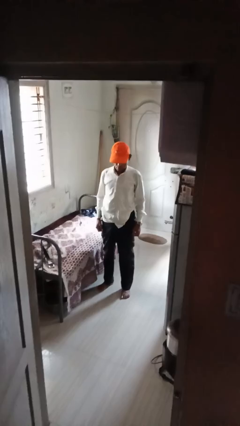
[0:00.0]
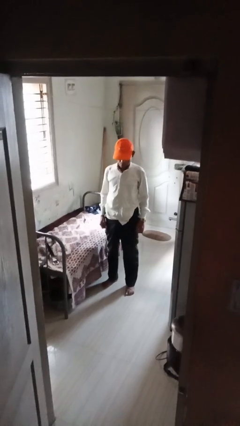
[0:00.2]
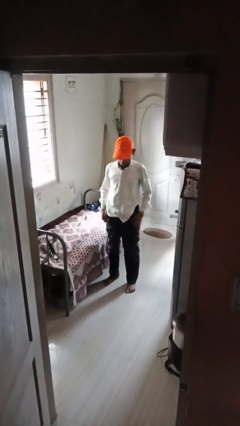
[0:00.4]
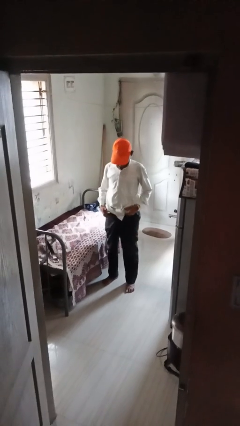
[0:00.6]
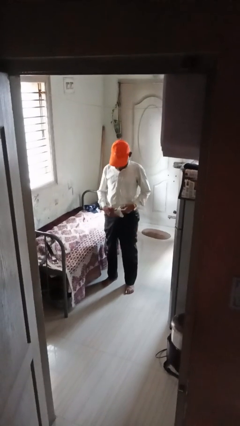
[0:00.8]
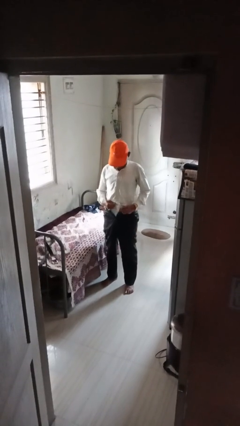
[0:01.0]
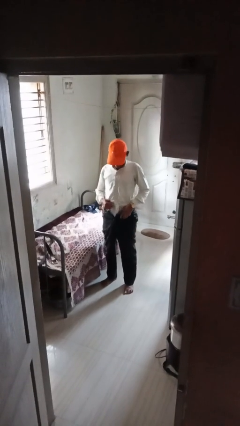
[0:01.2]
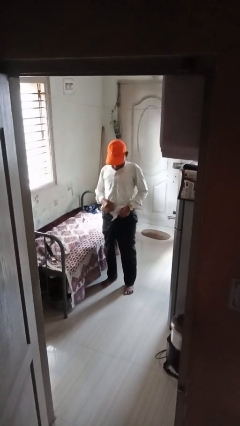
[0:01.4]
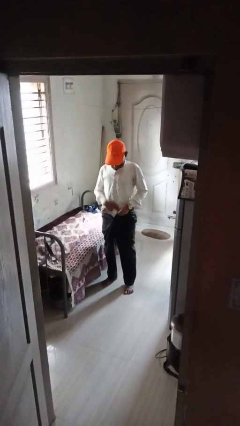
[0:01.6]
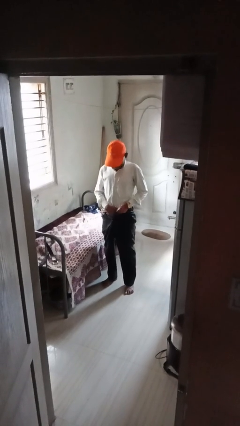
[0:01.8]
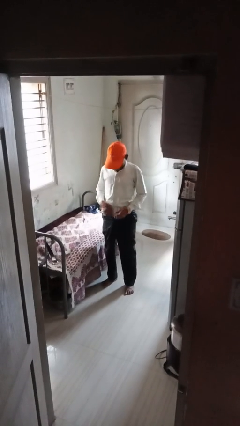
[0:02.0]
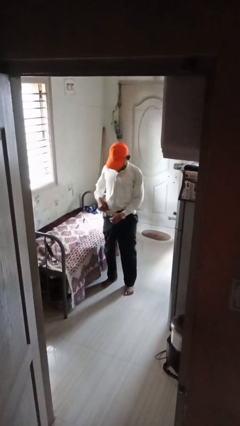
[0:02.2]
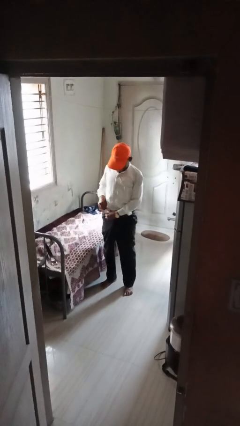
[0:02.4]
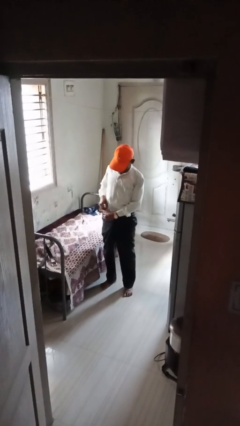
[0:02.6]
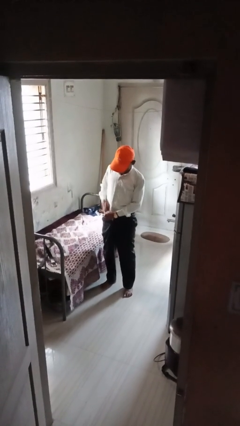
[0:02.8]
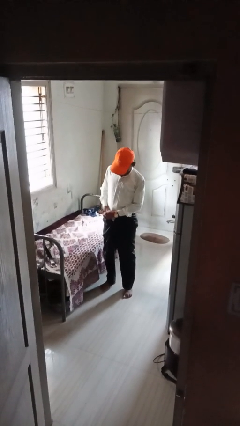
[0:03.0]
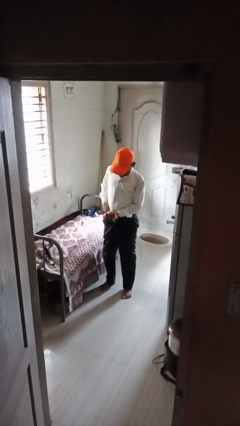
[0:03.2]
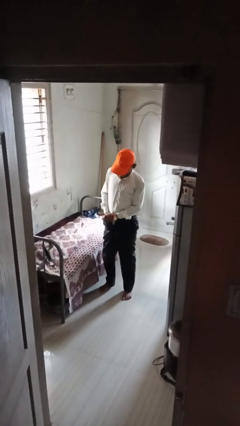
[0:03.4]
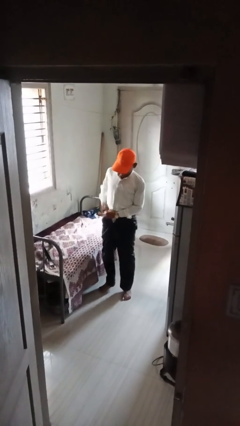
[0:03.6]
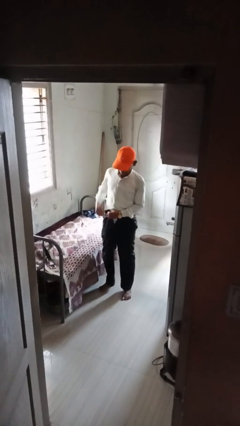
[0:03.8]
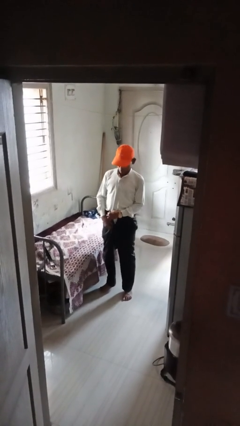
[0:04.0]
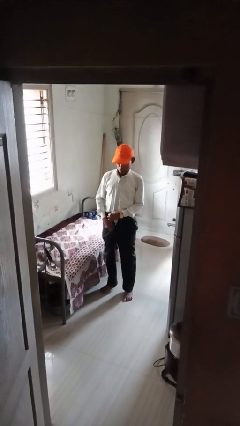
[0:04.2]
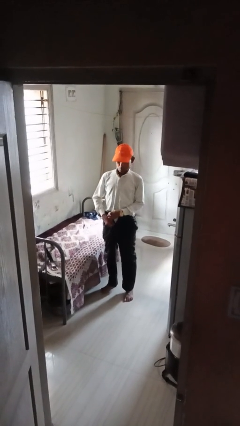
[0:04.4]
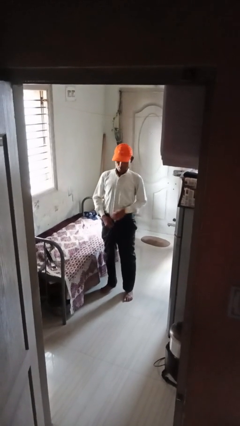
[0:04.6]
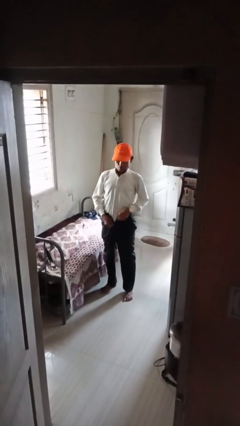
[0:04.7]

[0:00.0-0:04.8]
person tucks in shirt

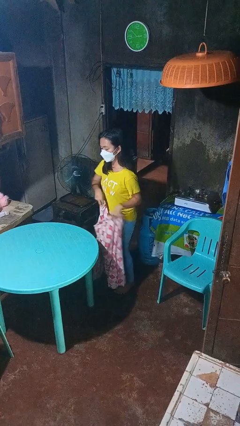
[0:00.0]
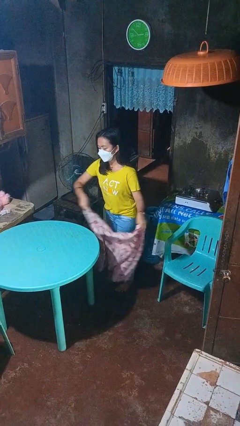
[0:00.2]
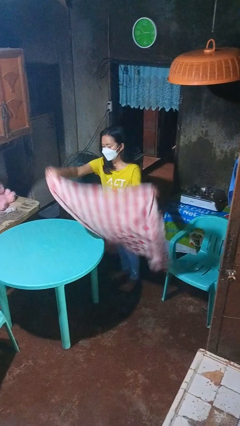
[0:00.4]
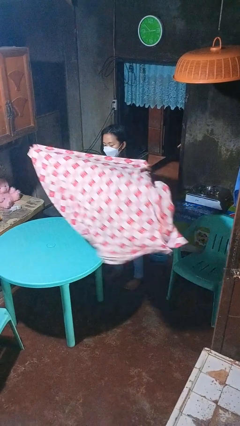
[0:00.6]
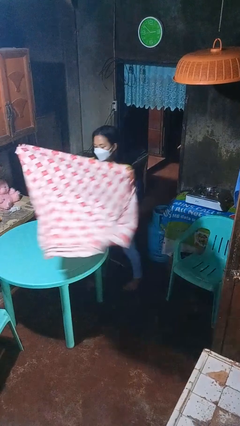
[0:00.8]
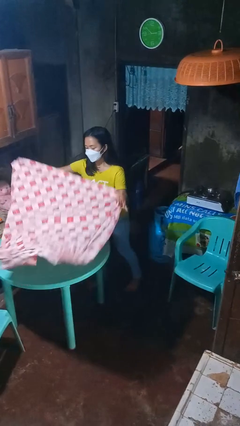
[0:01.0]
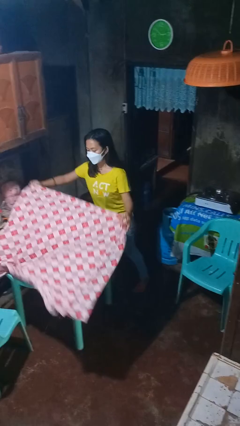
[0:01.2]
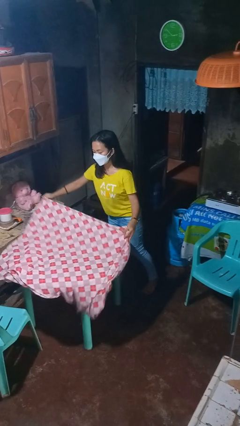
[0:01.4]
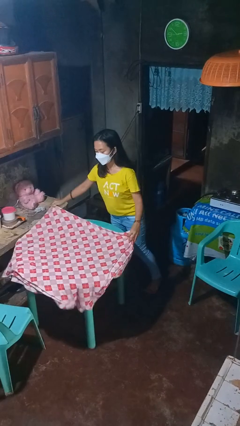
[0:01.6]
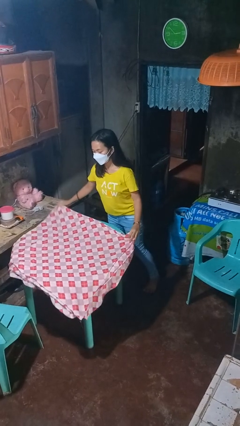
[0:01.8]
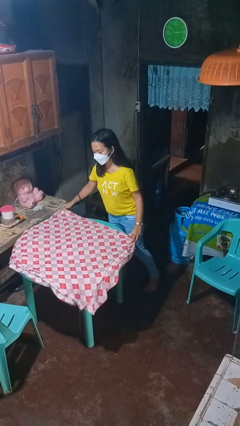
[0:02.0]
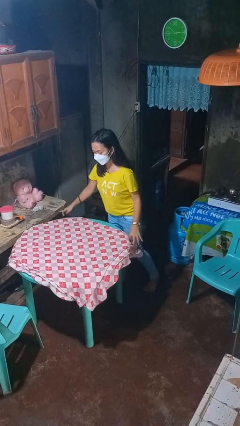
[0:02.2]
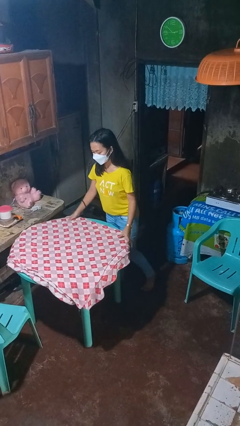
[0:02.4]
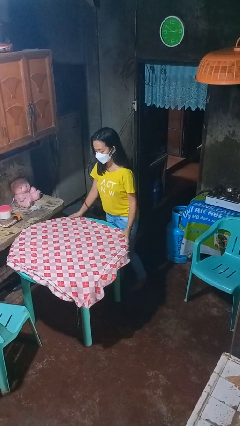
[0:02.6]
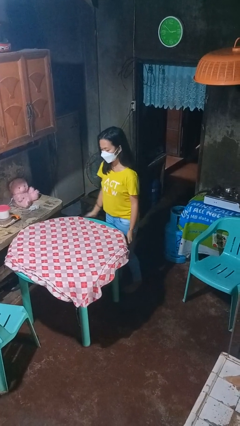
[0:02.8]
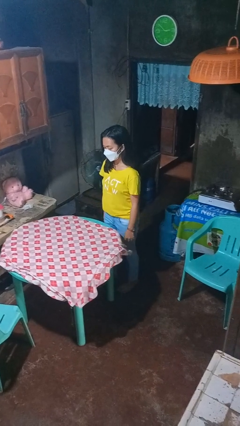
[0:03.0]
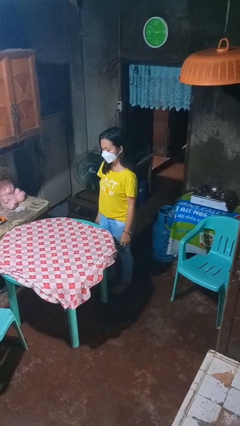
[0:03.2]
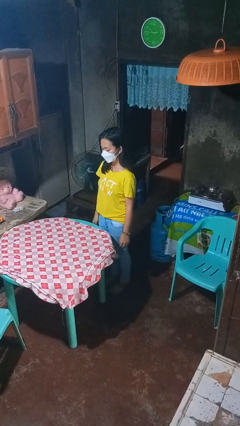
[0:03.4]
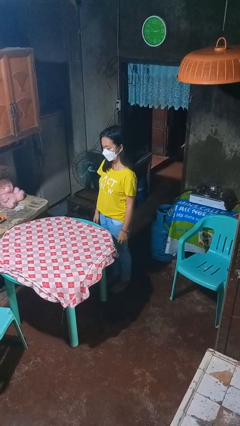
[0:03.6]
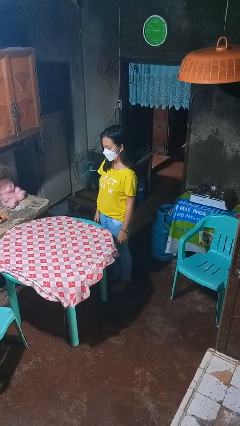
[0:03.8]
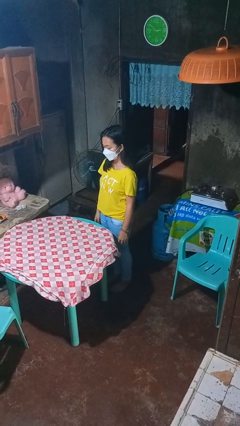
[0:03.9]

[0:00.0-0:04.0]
person spreads tablecloth

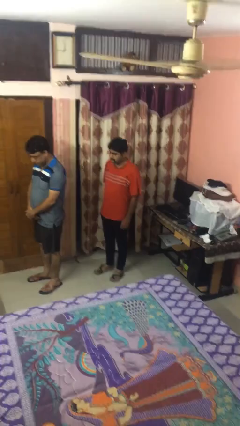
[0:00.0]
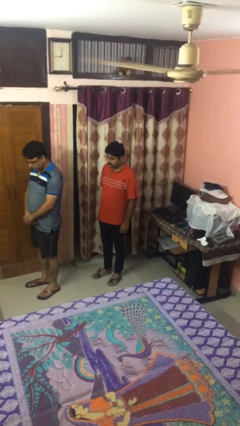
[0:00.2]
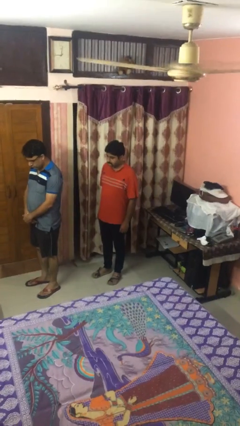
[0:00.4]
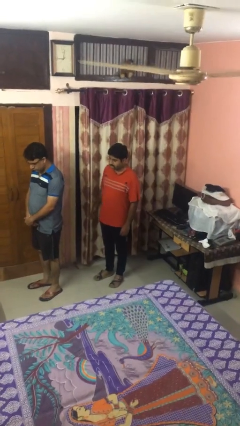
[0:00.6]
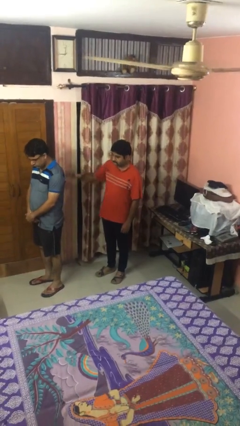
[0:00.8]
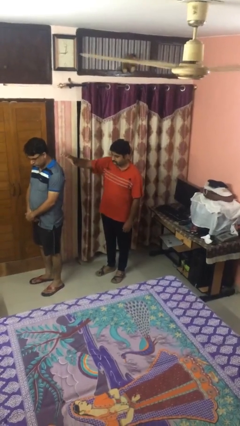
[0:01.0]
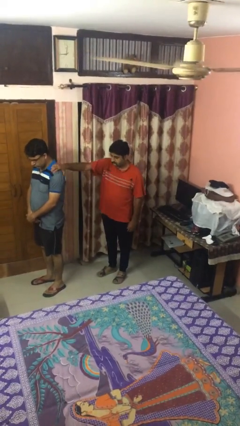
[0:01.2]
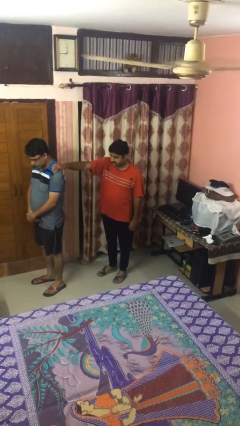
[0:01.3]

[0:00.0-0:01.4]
person grabs person by shoulder

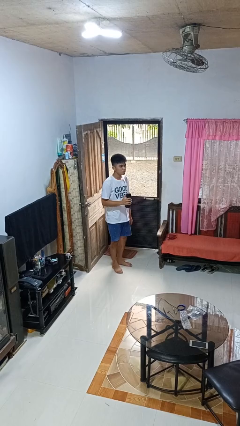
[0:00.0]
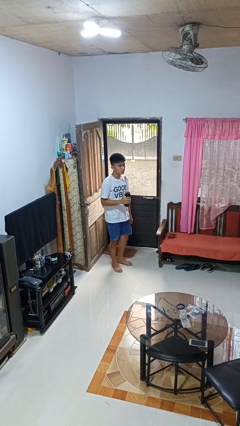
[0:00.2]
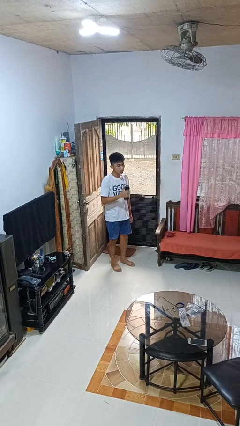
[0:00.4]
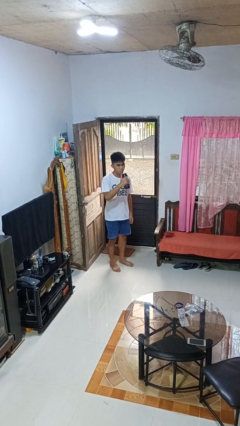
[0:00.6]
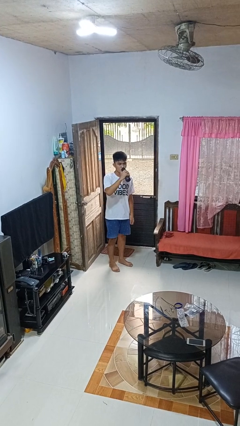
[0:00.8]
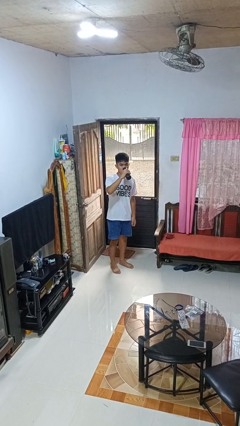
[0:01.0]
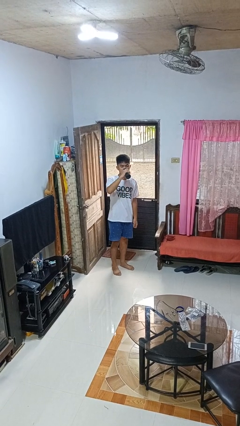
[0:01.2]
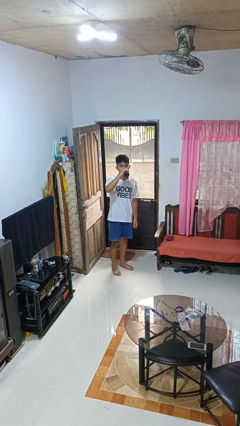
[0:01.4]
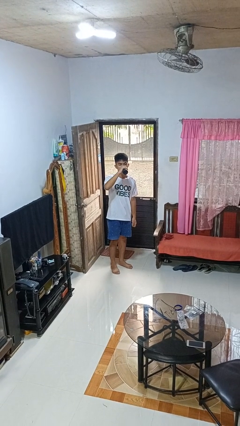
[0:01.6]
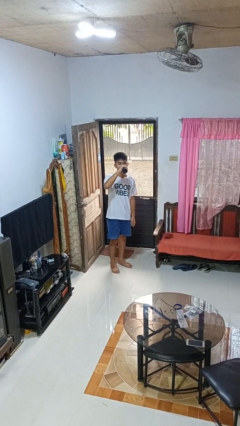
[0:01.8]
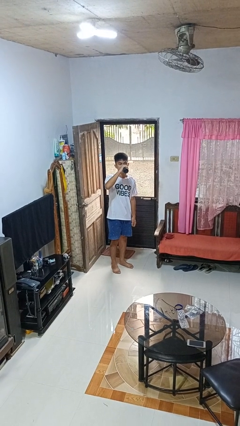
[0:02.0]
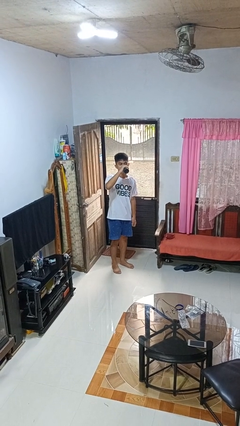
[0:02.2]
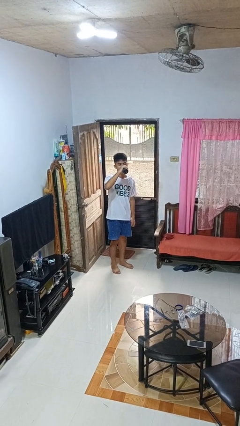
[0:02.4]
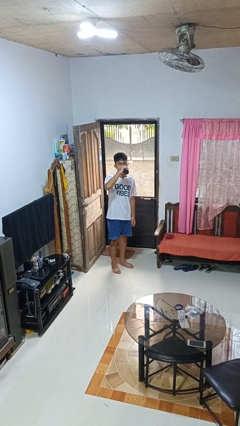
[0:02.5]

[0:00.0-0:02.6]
person drinks from bottle

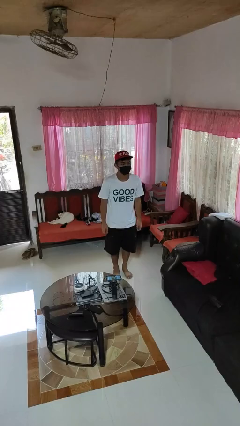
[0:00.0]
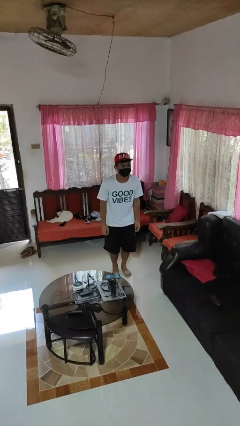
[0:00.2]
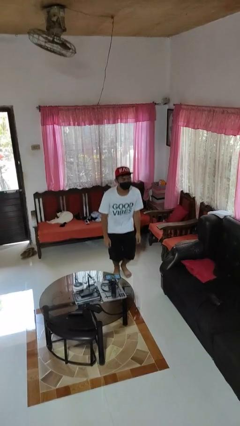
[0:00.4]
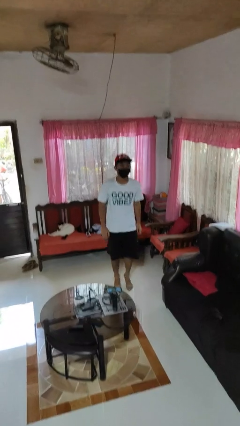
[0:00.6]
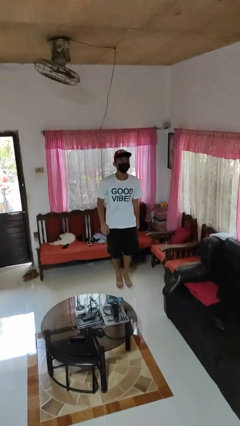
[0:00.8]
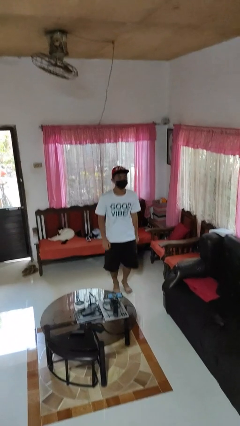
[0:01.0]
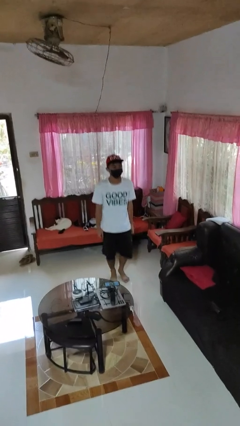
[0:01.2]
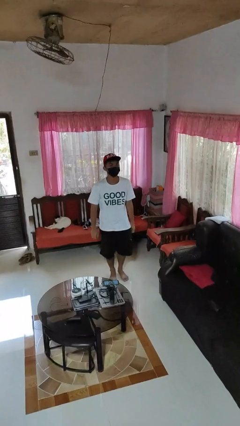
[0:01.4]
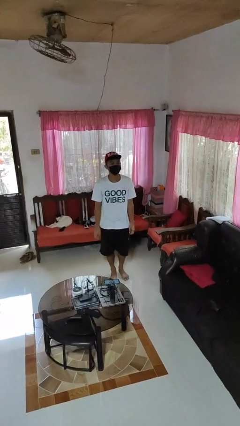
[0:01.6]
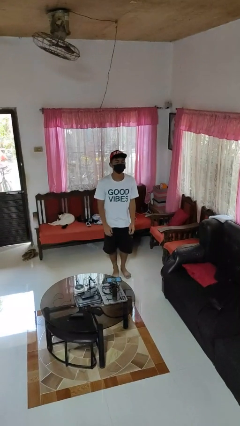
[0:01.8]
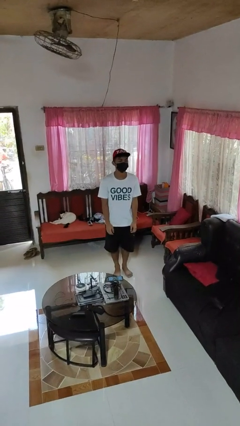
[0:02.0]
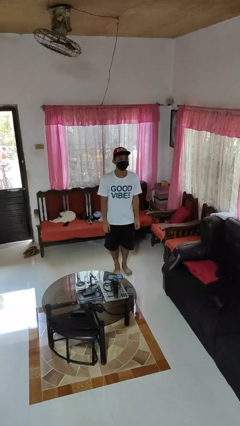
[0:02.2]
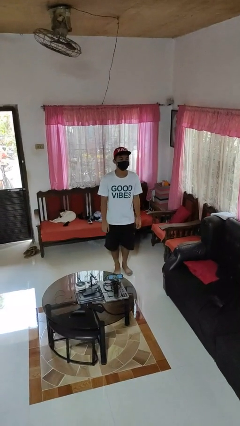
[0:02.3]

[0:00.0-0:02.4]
person jumps

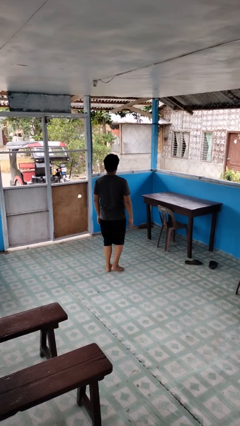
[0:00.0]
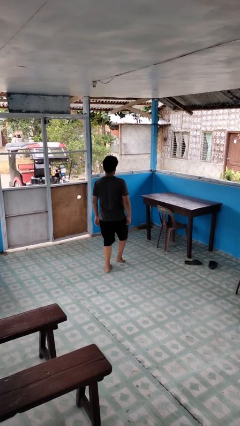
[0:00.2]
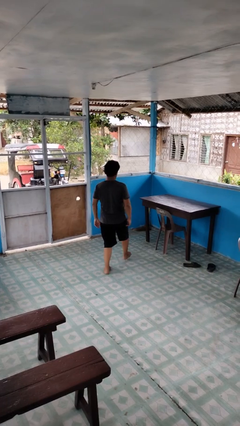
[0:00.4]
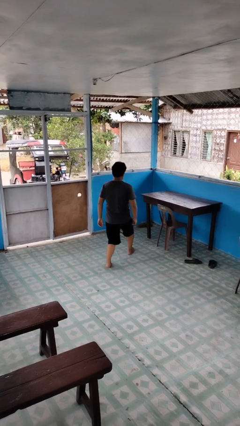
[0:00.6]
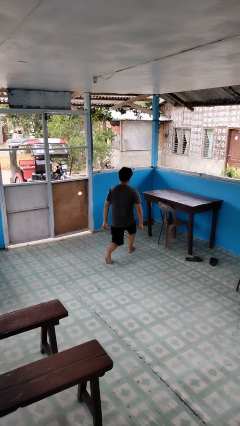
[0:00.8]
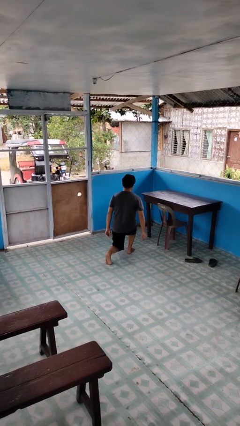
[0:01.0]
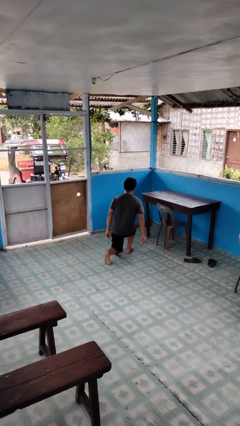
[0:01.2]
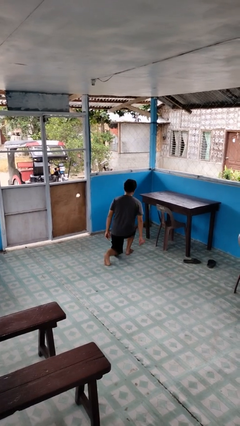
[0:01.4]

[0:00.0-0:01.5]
person exercises with lunges

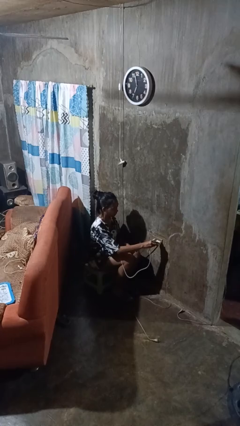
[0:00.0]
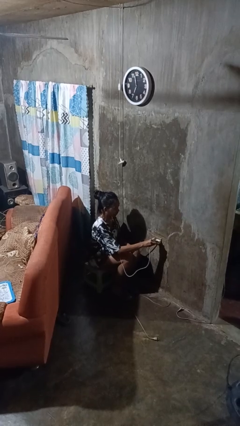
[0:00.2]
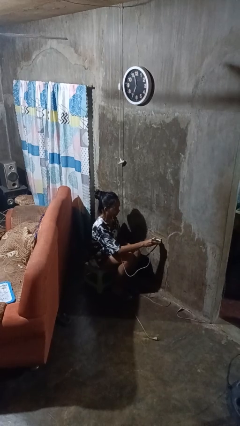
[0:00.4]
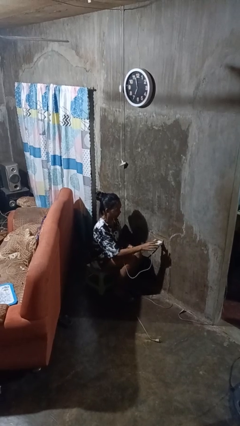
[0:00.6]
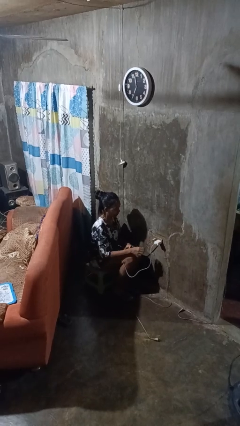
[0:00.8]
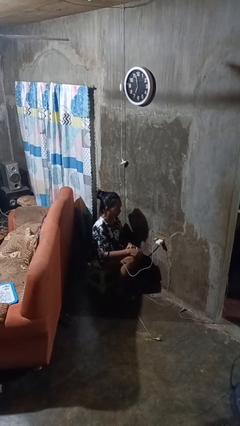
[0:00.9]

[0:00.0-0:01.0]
person plugs into electrical socket
